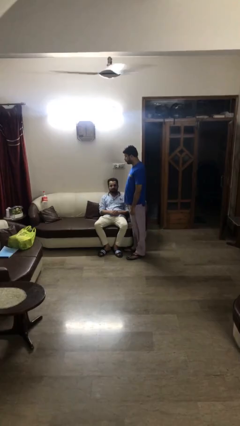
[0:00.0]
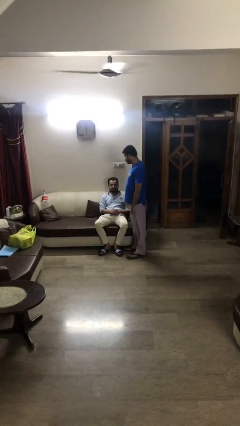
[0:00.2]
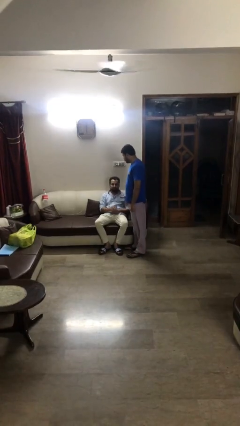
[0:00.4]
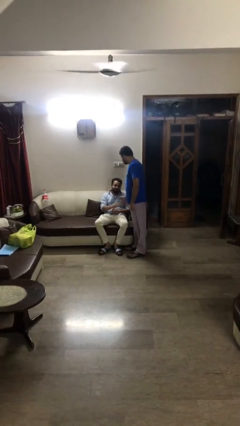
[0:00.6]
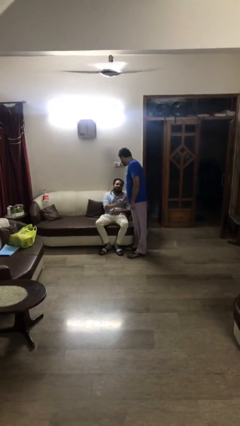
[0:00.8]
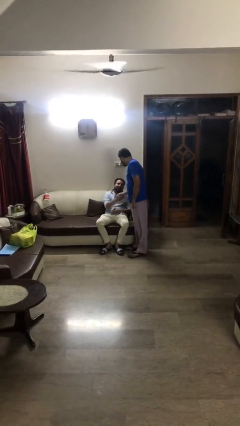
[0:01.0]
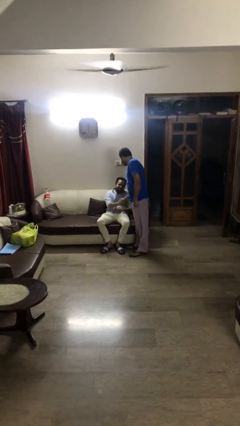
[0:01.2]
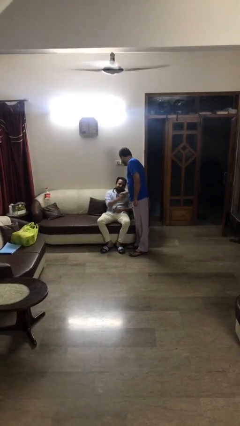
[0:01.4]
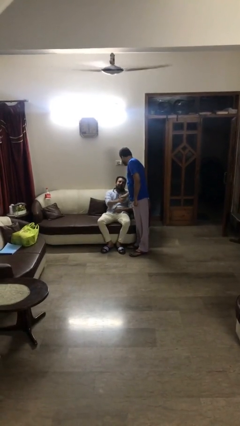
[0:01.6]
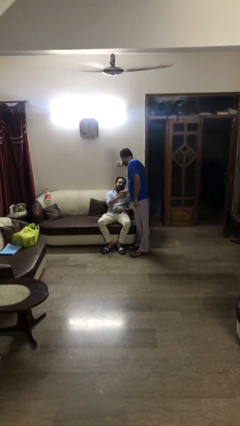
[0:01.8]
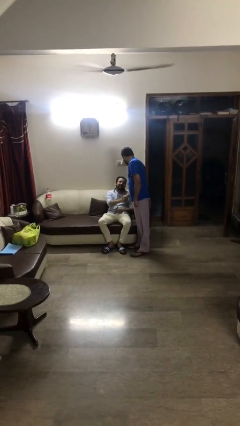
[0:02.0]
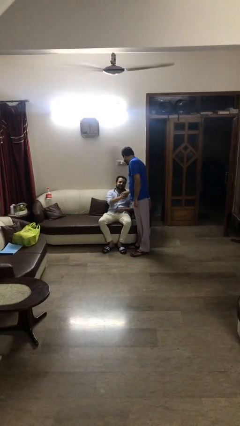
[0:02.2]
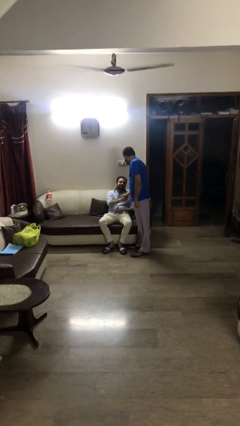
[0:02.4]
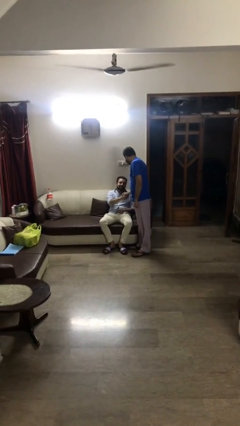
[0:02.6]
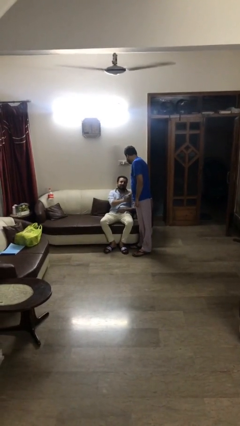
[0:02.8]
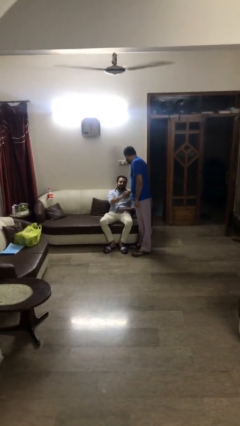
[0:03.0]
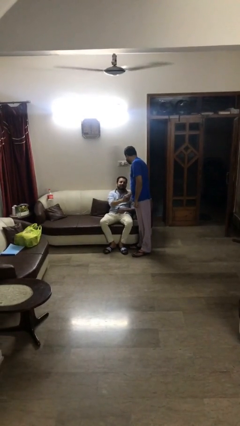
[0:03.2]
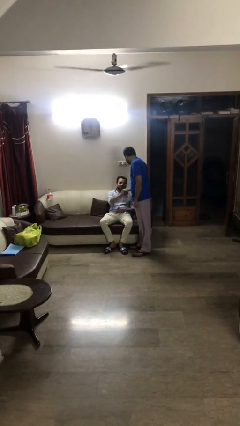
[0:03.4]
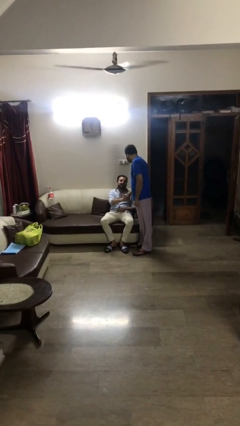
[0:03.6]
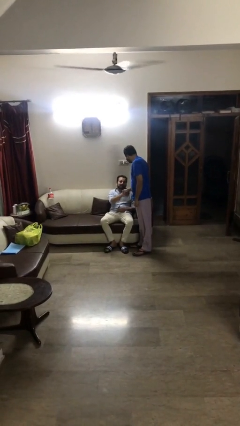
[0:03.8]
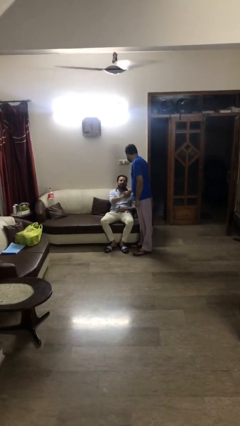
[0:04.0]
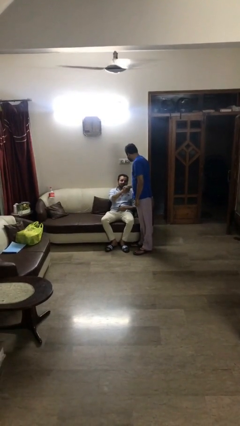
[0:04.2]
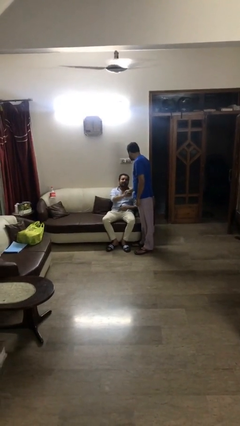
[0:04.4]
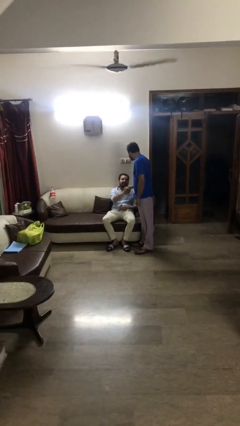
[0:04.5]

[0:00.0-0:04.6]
person shakes hand

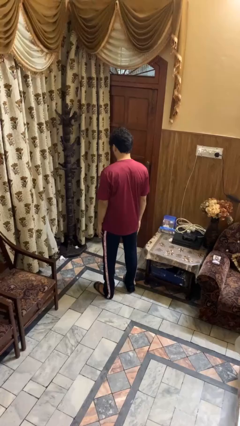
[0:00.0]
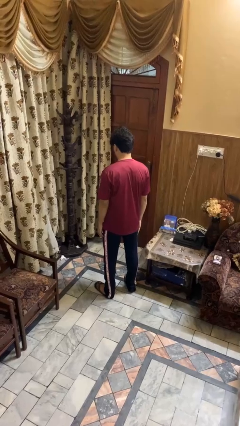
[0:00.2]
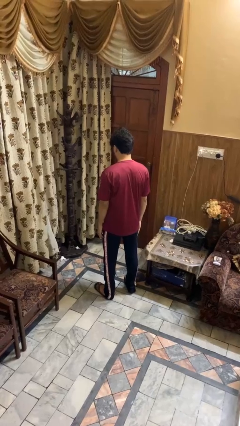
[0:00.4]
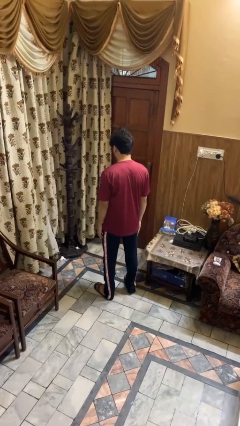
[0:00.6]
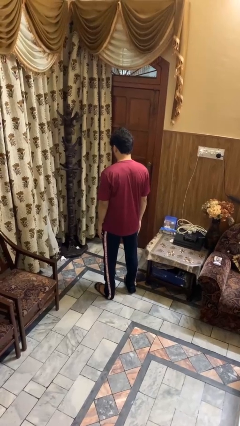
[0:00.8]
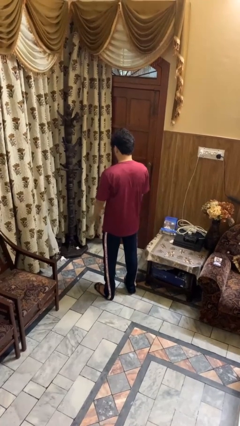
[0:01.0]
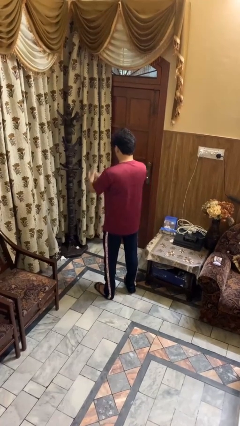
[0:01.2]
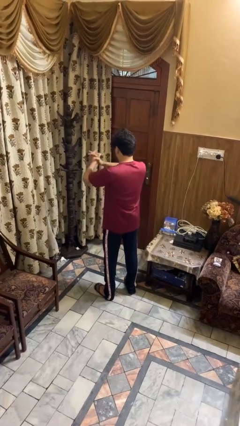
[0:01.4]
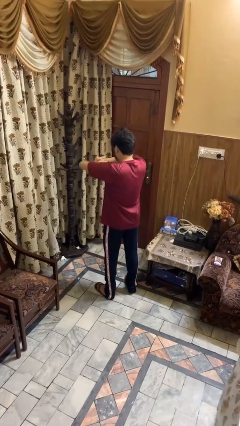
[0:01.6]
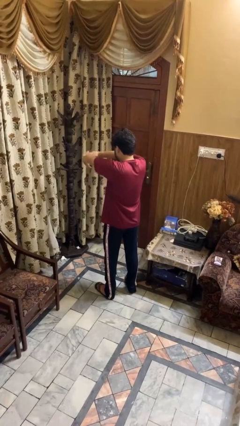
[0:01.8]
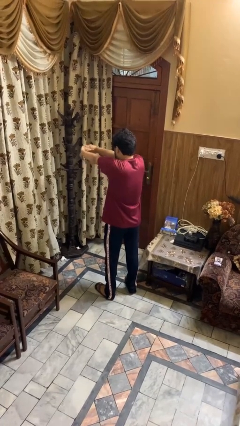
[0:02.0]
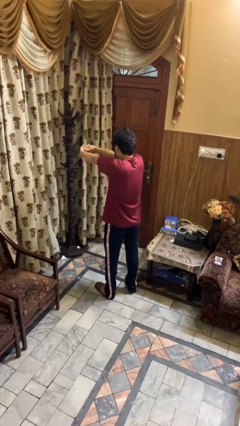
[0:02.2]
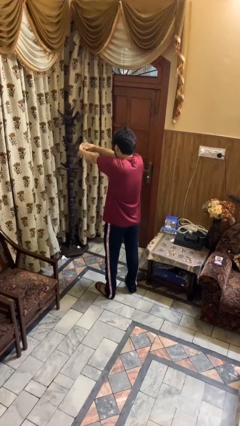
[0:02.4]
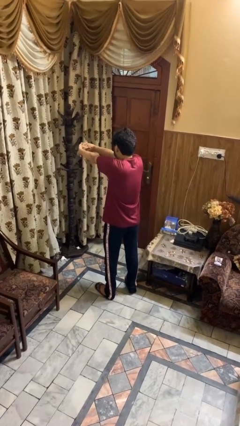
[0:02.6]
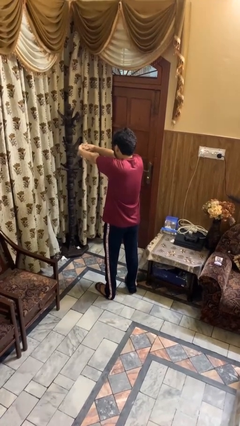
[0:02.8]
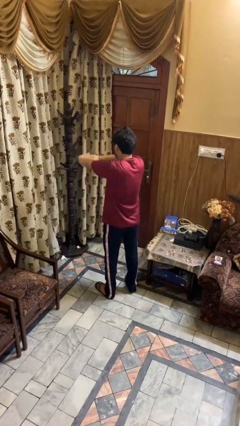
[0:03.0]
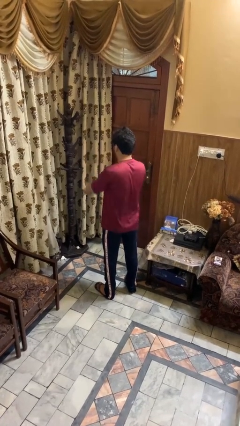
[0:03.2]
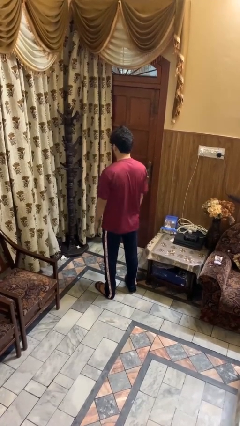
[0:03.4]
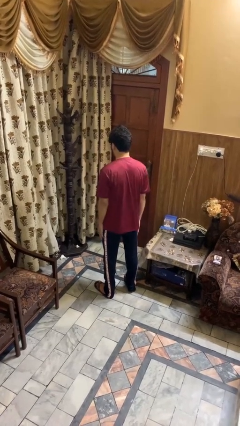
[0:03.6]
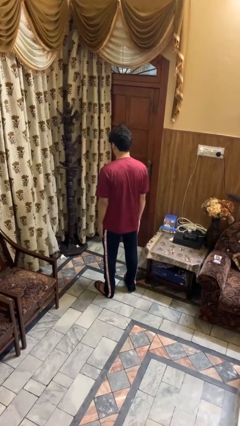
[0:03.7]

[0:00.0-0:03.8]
person cracks knuckles

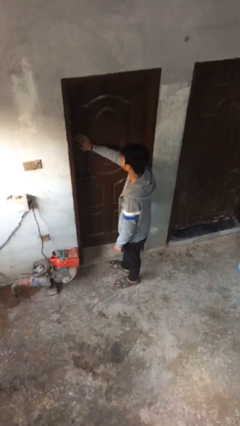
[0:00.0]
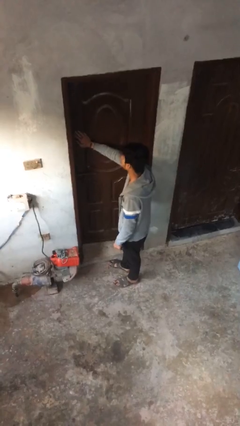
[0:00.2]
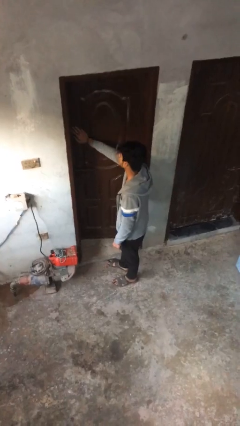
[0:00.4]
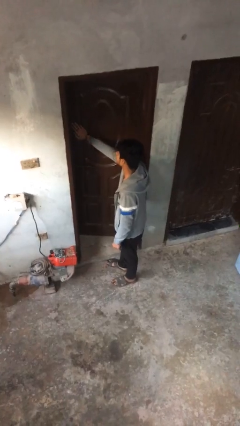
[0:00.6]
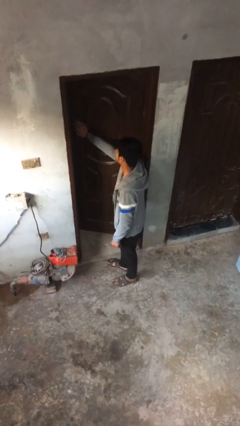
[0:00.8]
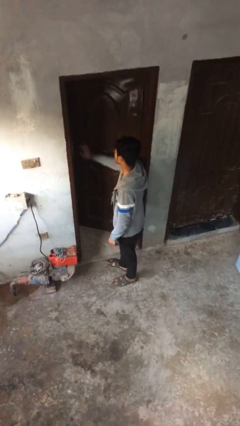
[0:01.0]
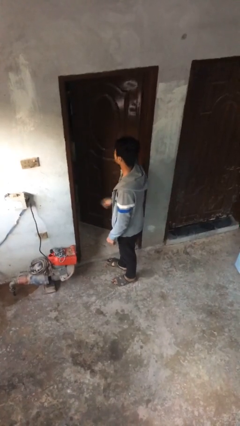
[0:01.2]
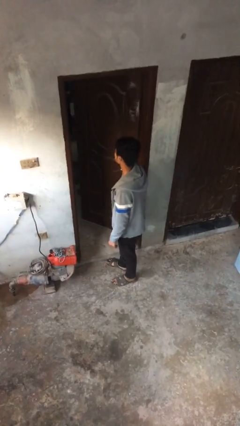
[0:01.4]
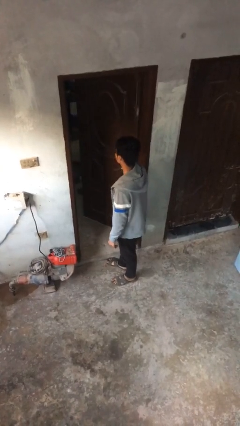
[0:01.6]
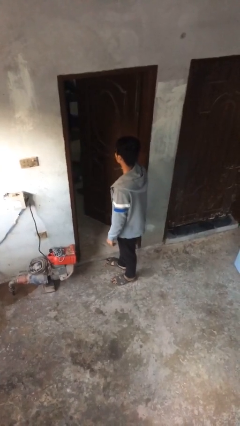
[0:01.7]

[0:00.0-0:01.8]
person opens facility door

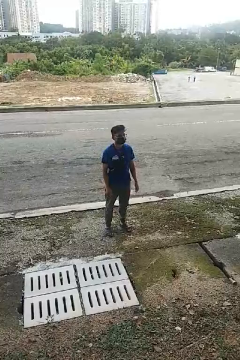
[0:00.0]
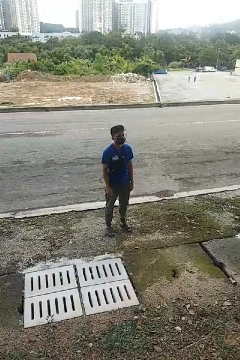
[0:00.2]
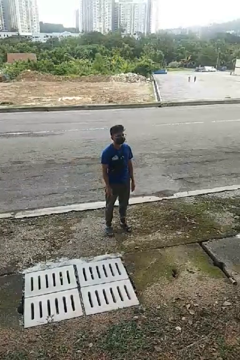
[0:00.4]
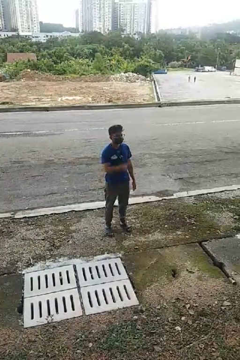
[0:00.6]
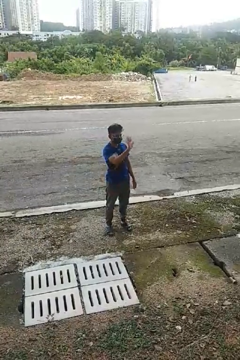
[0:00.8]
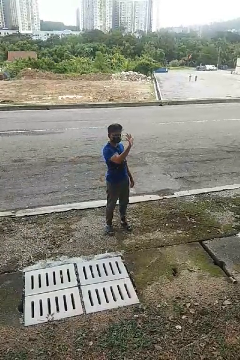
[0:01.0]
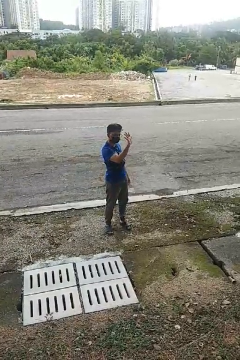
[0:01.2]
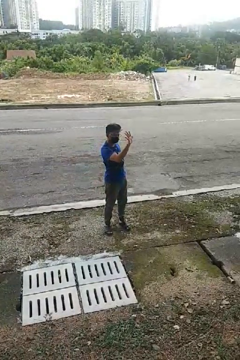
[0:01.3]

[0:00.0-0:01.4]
person gestures stop

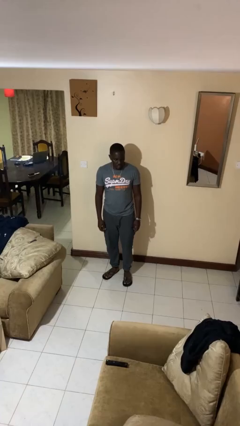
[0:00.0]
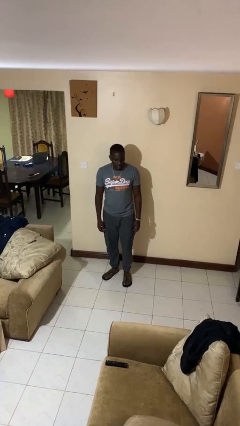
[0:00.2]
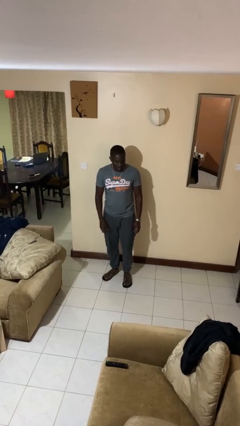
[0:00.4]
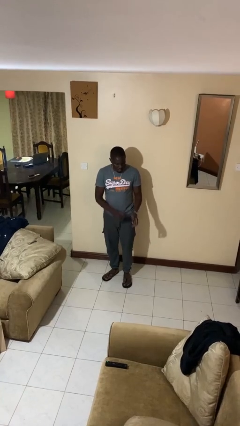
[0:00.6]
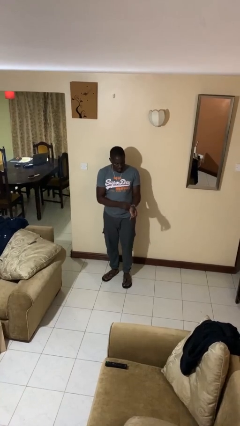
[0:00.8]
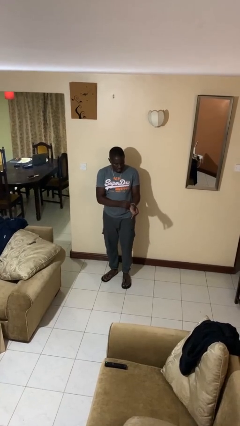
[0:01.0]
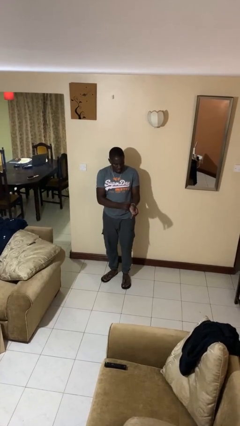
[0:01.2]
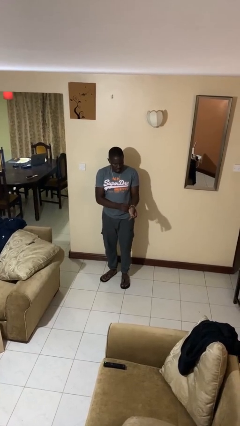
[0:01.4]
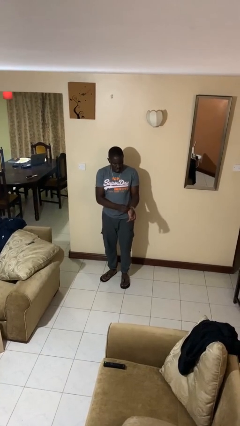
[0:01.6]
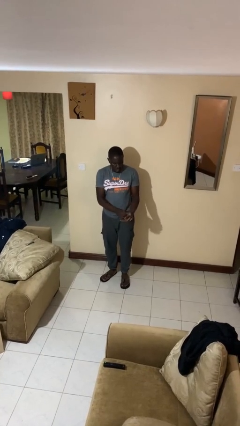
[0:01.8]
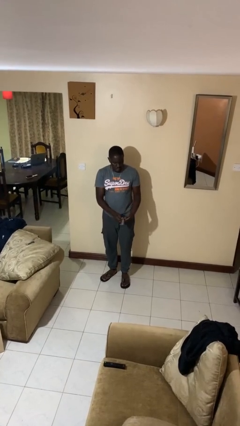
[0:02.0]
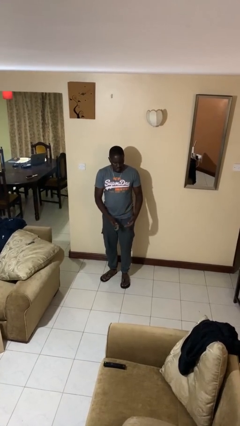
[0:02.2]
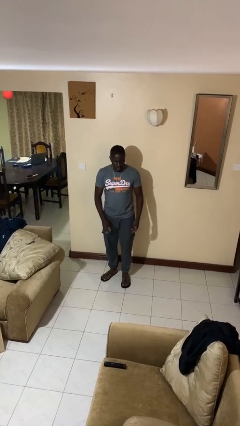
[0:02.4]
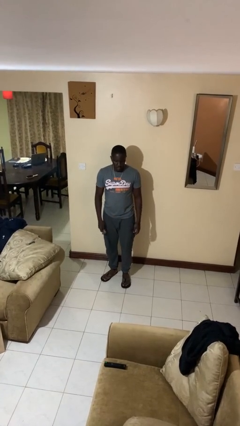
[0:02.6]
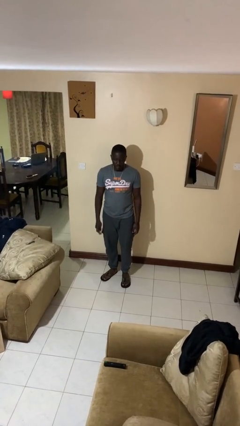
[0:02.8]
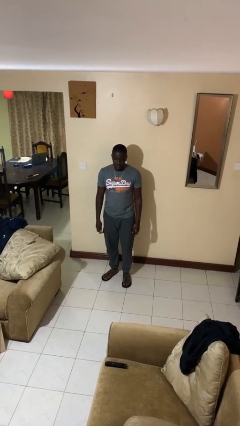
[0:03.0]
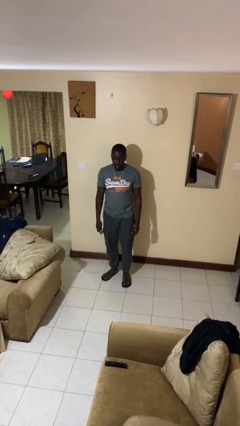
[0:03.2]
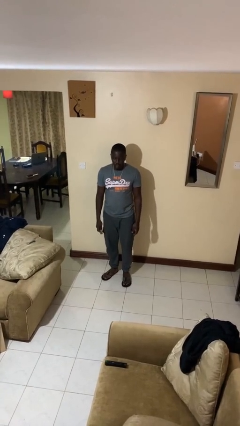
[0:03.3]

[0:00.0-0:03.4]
person takes off wristwatch

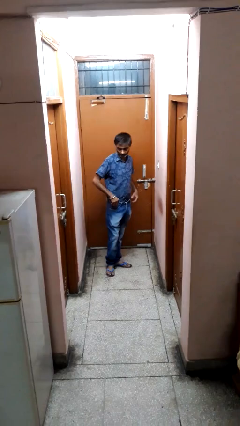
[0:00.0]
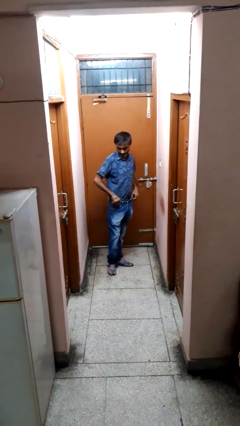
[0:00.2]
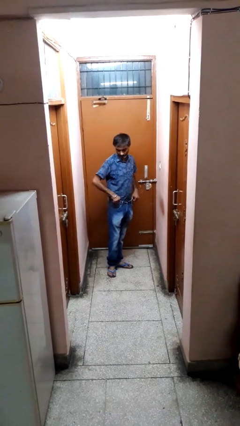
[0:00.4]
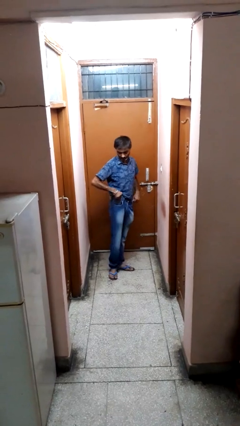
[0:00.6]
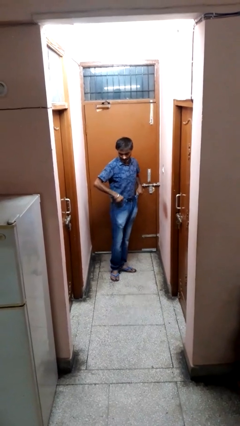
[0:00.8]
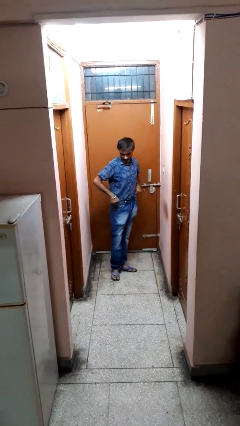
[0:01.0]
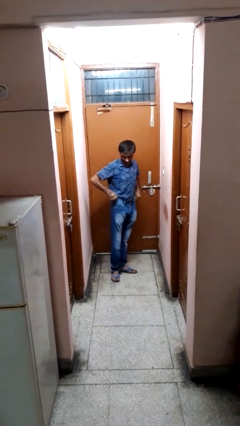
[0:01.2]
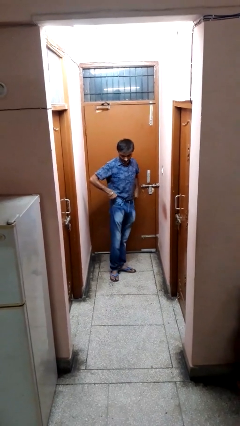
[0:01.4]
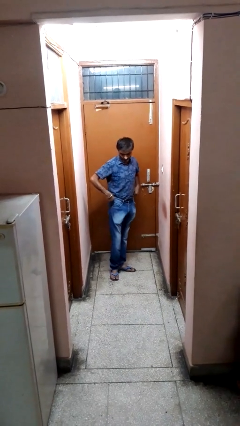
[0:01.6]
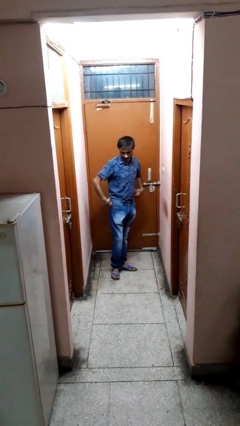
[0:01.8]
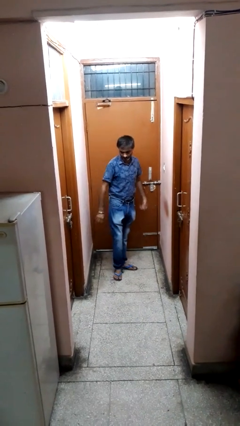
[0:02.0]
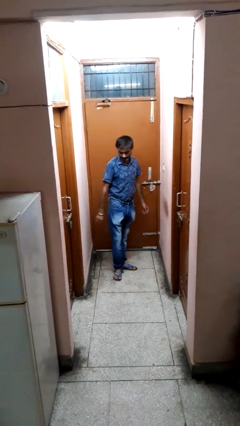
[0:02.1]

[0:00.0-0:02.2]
person hikes up pants

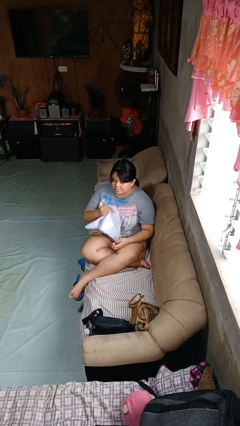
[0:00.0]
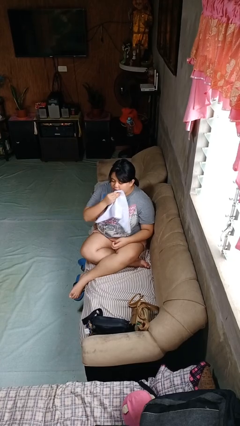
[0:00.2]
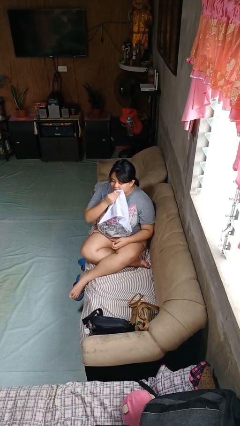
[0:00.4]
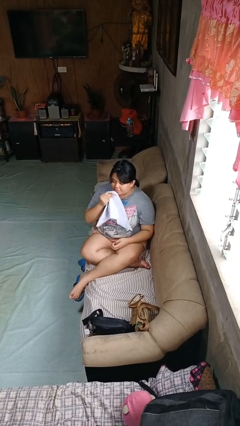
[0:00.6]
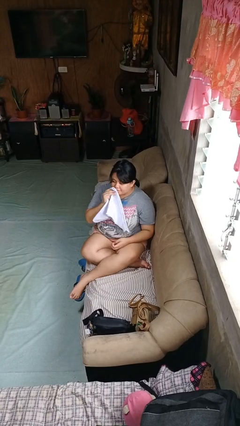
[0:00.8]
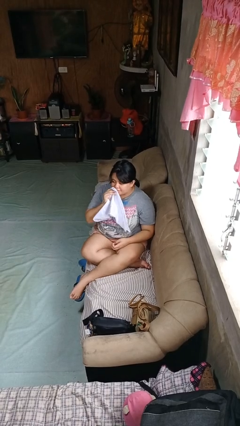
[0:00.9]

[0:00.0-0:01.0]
person wipes mouth with napkin
